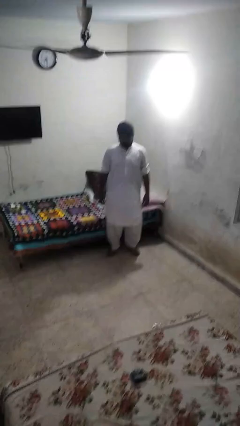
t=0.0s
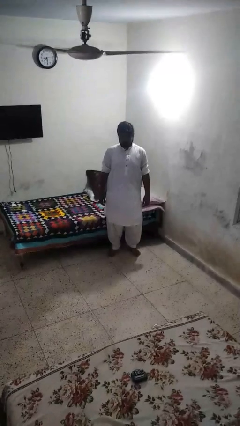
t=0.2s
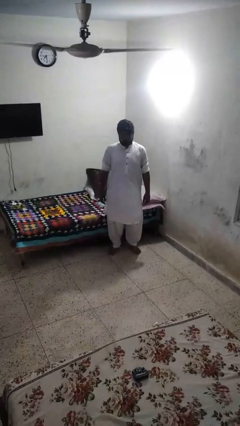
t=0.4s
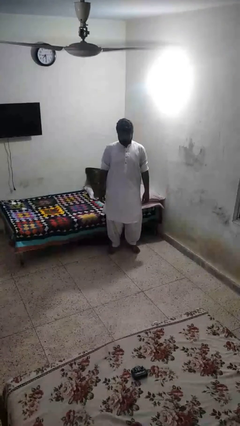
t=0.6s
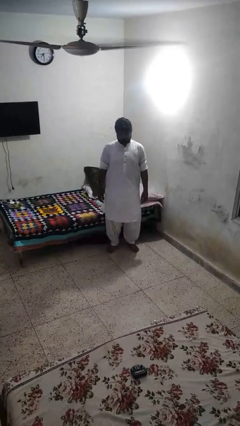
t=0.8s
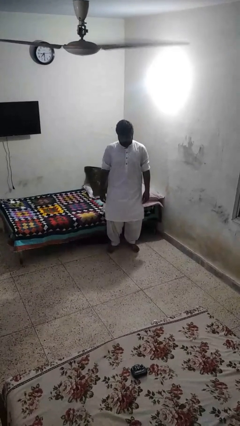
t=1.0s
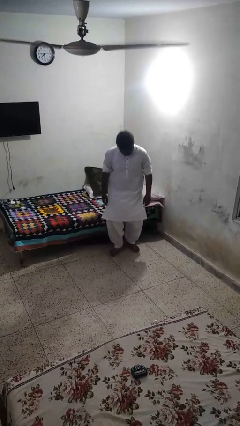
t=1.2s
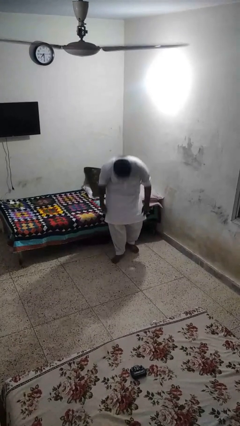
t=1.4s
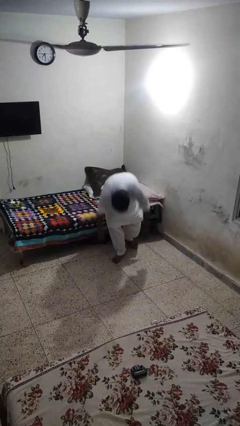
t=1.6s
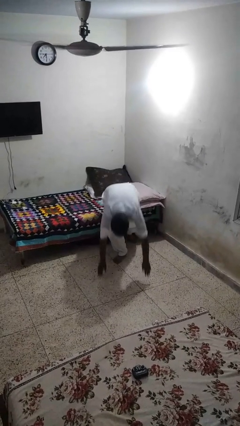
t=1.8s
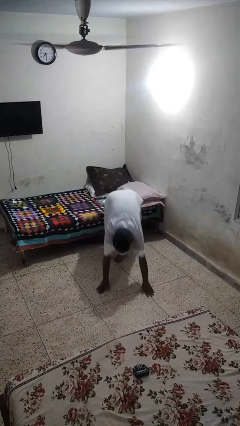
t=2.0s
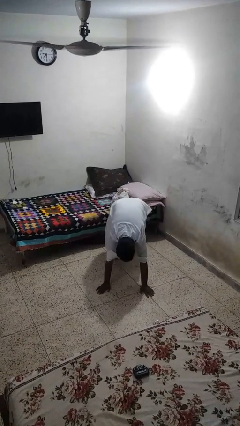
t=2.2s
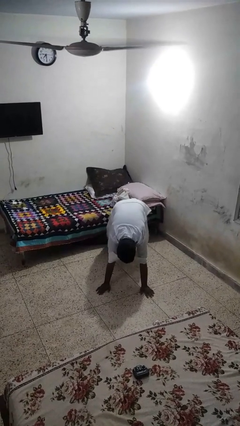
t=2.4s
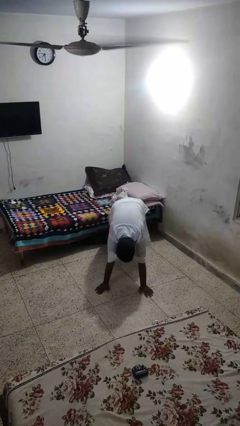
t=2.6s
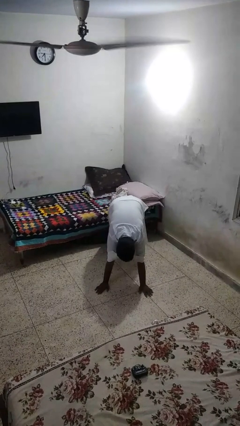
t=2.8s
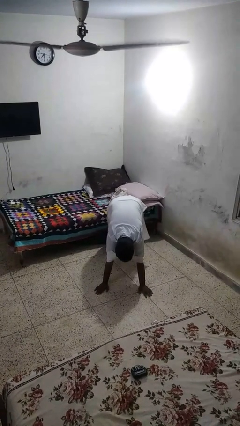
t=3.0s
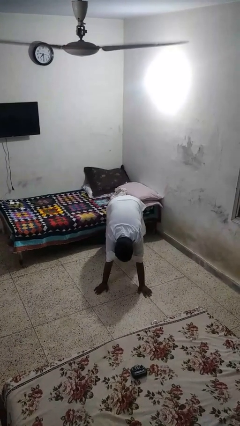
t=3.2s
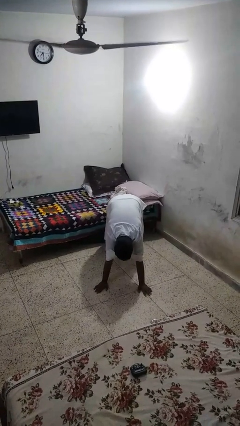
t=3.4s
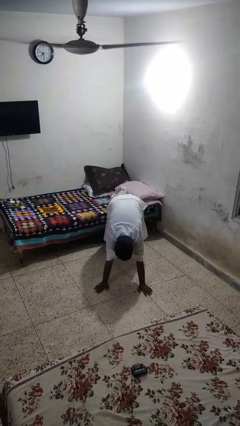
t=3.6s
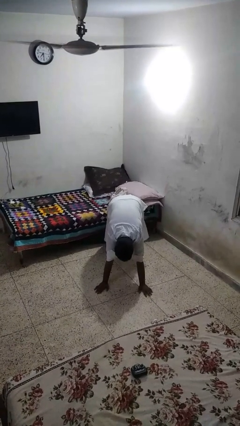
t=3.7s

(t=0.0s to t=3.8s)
person exercises with plank

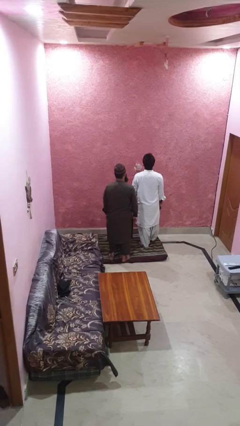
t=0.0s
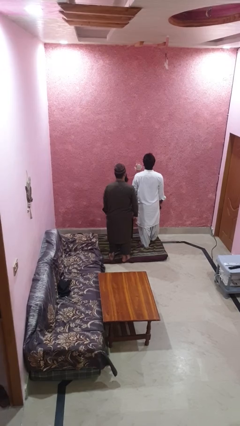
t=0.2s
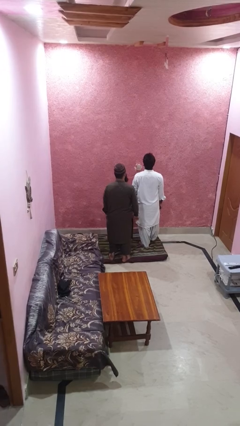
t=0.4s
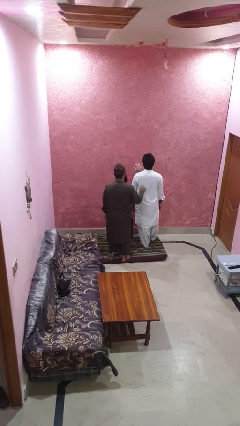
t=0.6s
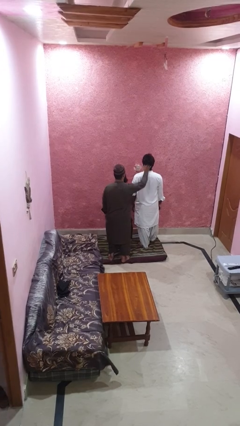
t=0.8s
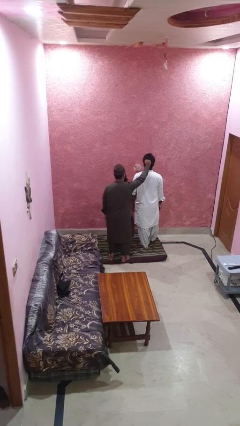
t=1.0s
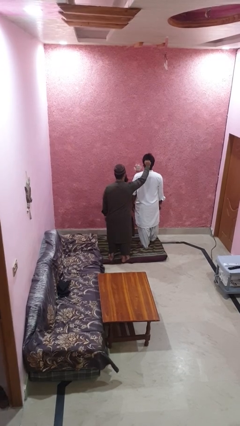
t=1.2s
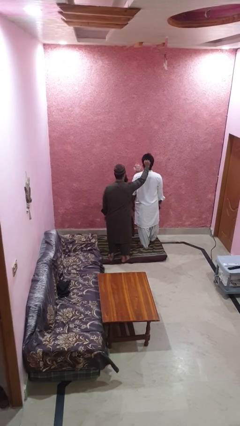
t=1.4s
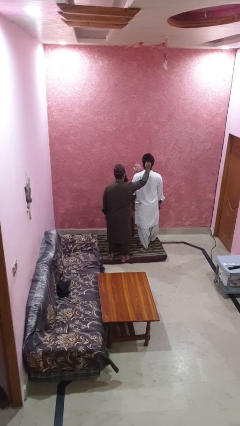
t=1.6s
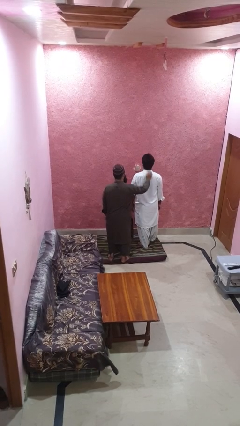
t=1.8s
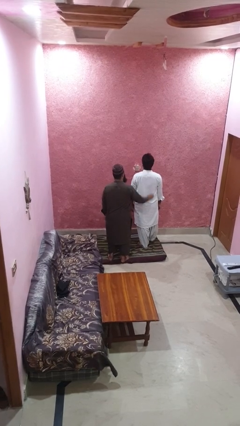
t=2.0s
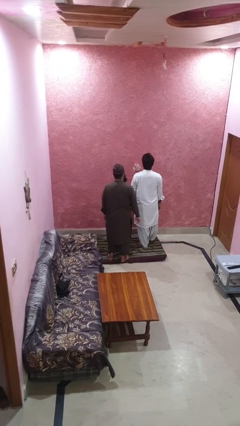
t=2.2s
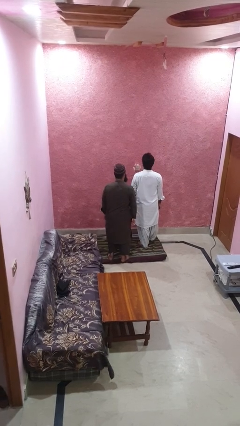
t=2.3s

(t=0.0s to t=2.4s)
person grabs person by hair

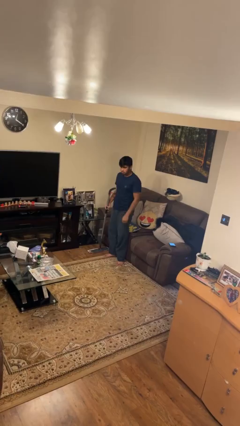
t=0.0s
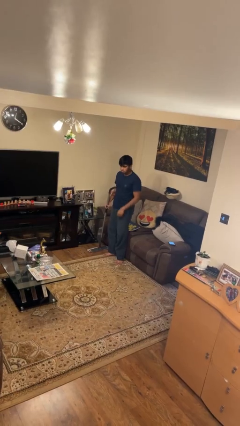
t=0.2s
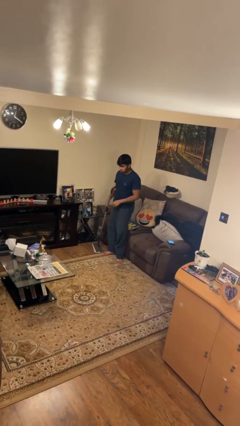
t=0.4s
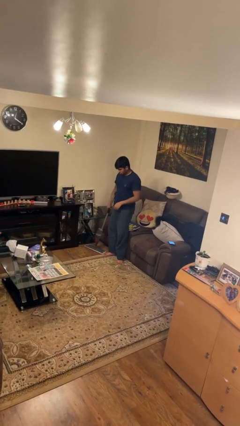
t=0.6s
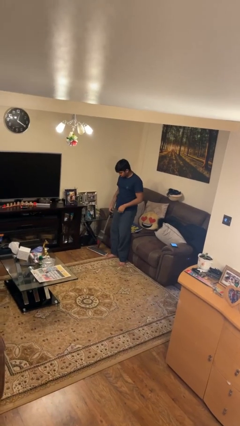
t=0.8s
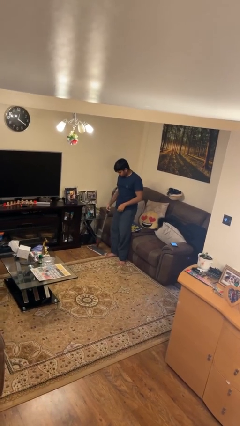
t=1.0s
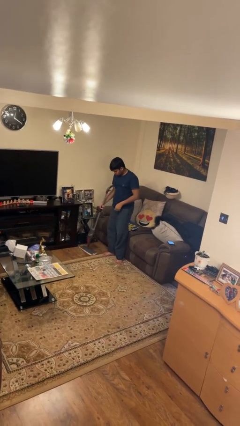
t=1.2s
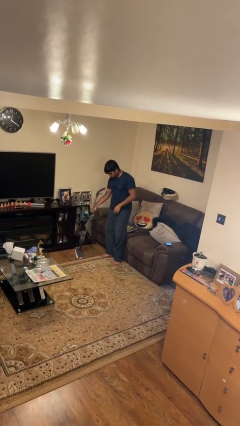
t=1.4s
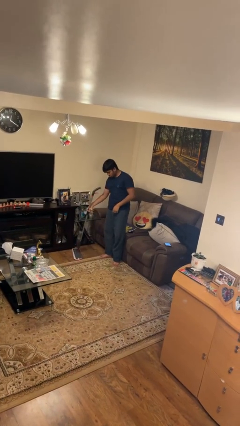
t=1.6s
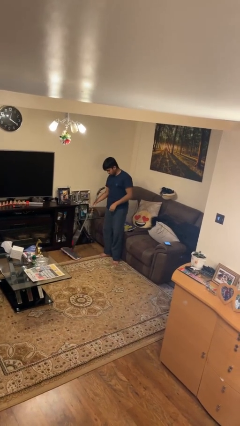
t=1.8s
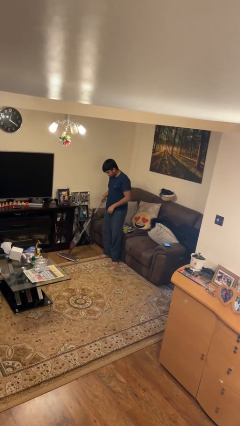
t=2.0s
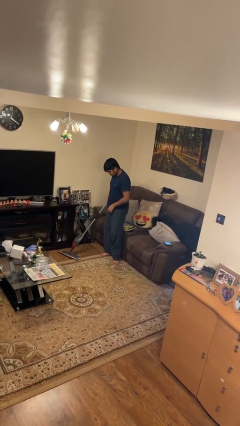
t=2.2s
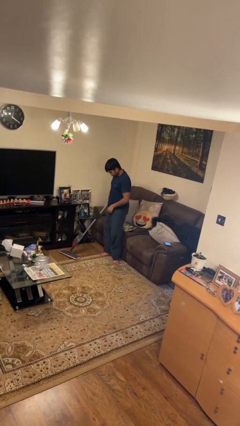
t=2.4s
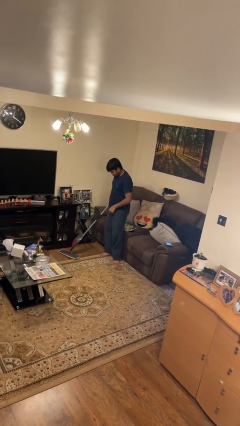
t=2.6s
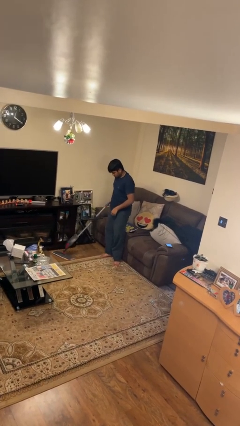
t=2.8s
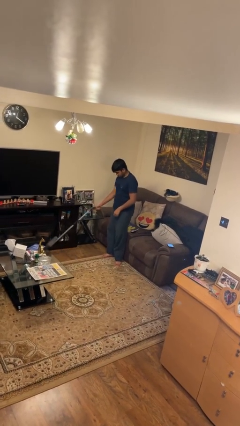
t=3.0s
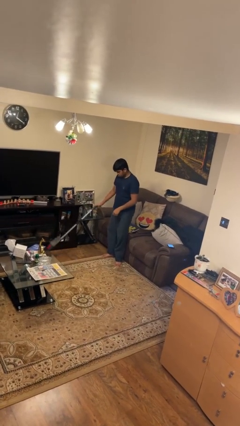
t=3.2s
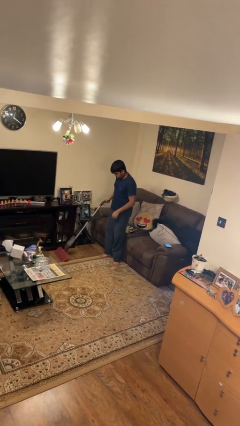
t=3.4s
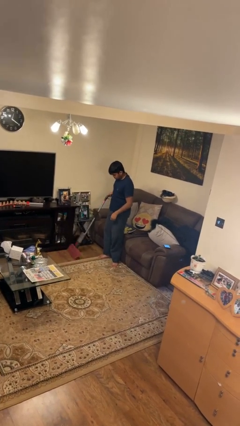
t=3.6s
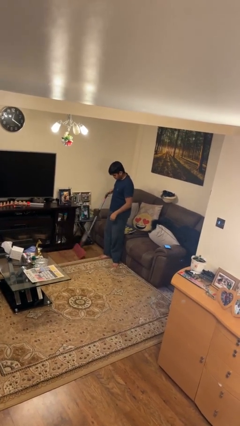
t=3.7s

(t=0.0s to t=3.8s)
person mops

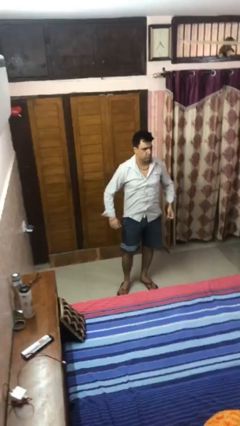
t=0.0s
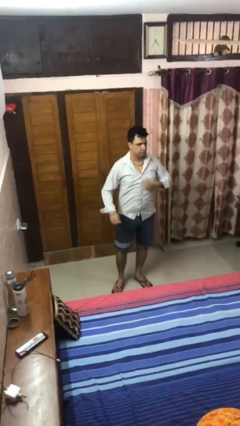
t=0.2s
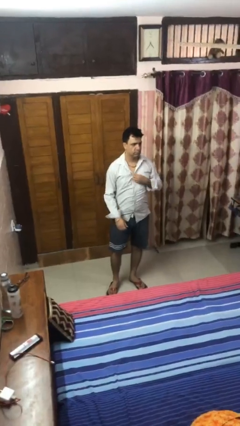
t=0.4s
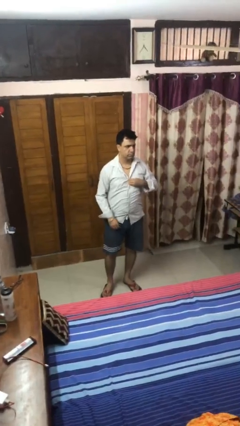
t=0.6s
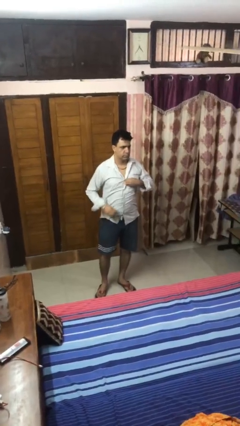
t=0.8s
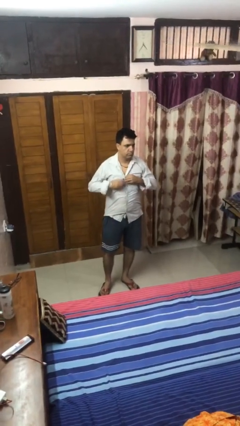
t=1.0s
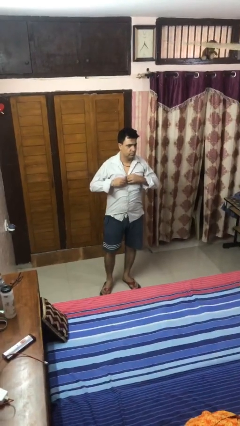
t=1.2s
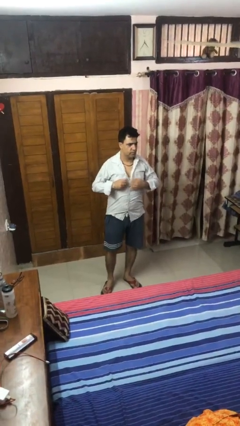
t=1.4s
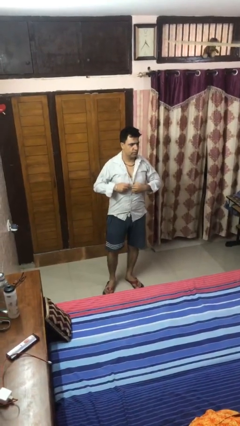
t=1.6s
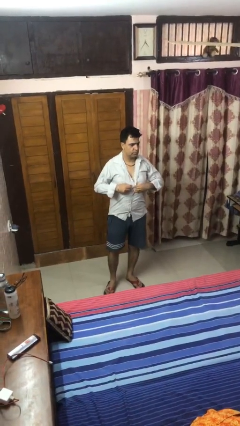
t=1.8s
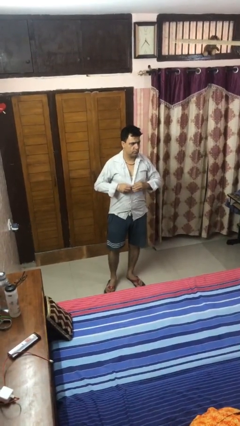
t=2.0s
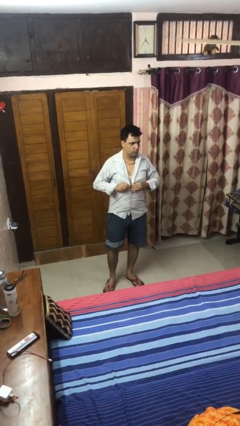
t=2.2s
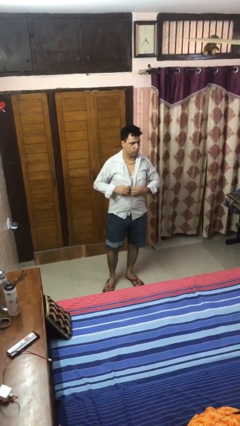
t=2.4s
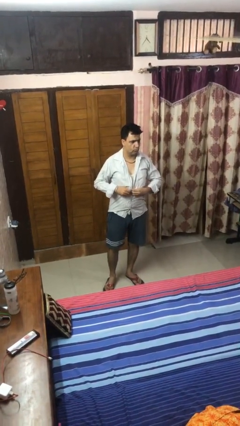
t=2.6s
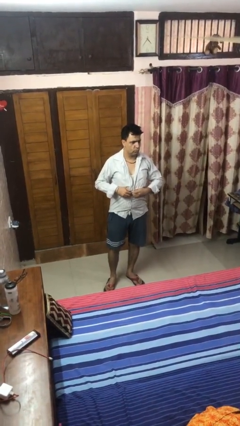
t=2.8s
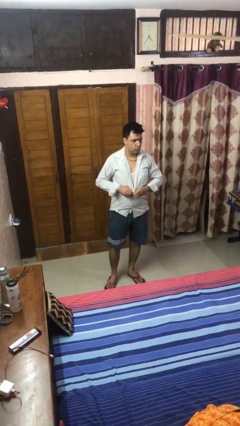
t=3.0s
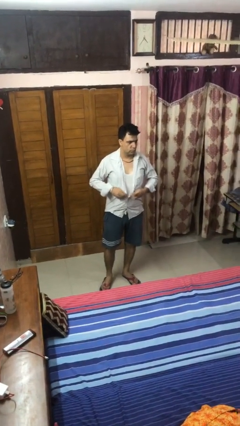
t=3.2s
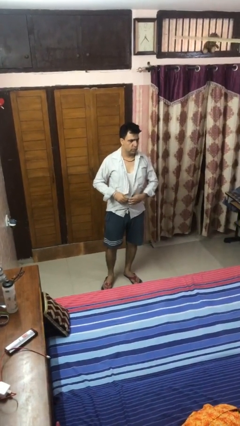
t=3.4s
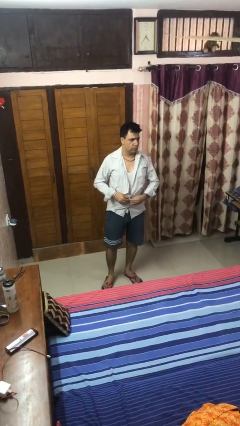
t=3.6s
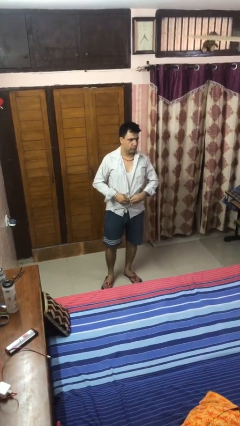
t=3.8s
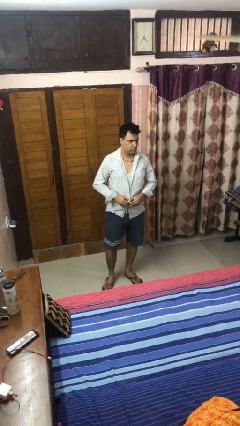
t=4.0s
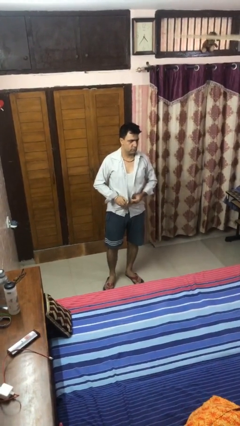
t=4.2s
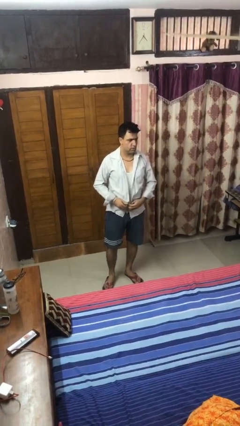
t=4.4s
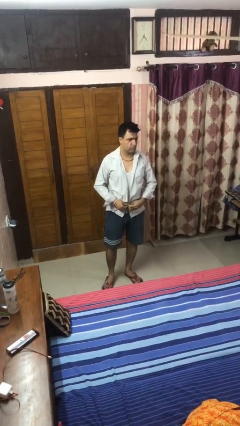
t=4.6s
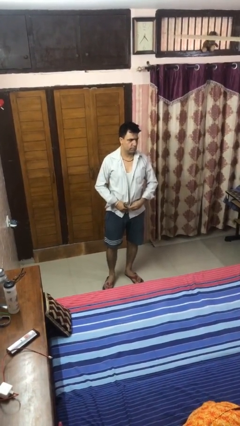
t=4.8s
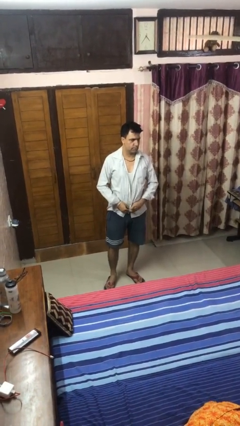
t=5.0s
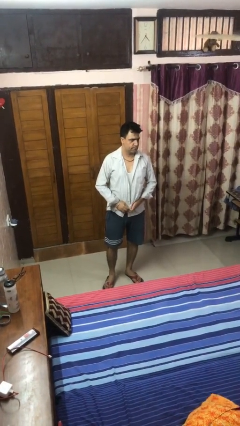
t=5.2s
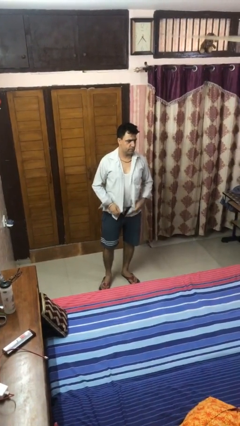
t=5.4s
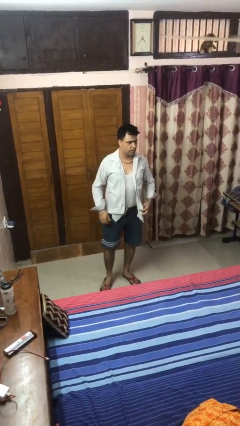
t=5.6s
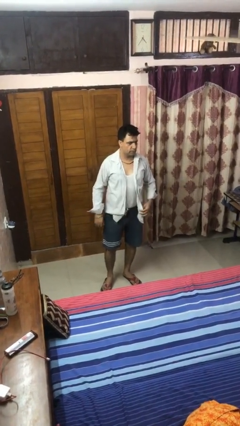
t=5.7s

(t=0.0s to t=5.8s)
person unbuttons shirt

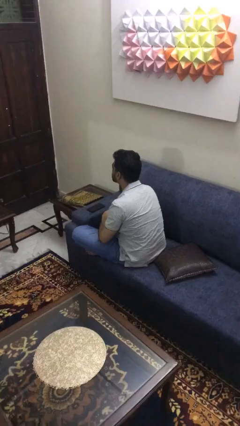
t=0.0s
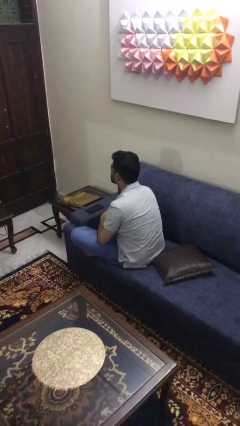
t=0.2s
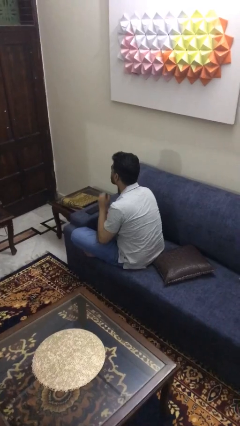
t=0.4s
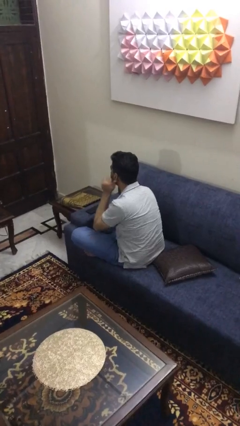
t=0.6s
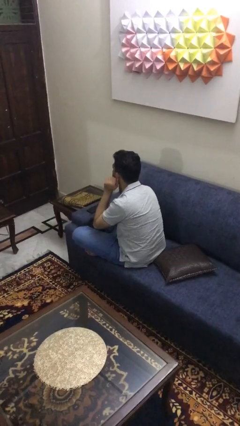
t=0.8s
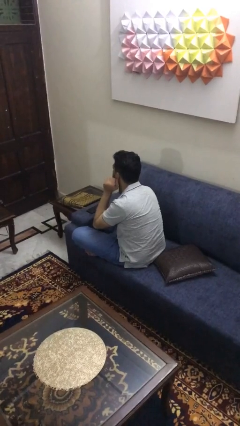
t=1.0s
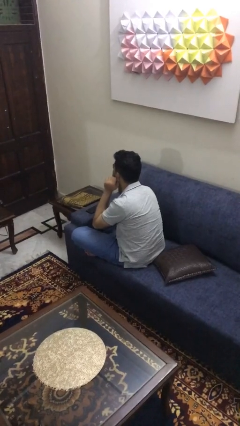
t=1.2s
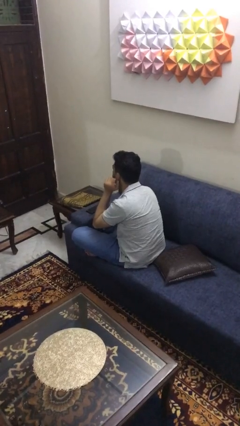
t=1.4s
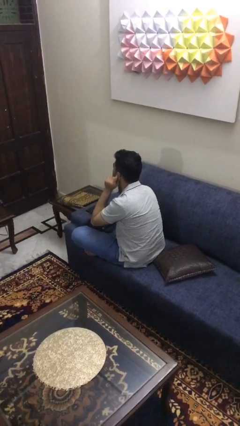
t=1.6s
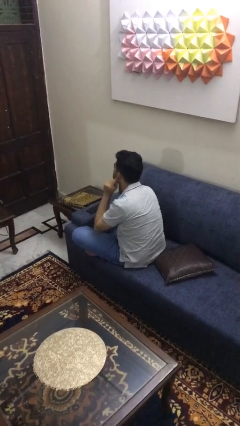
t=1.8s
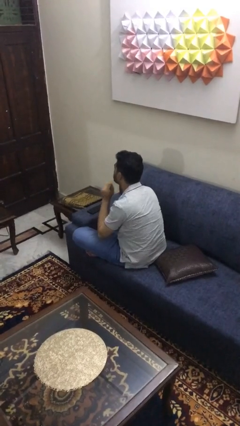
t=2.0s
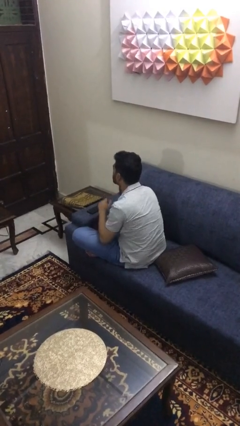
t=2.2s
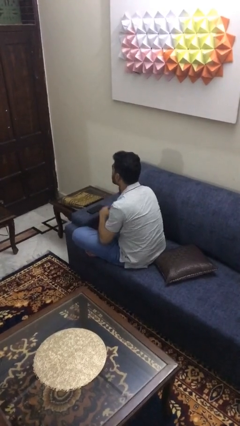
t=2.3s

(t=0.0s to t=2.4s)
person touches earlobe
